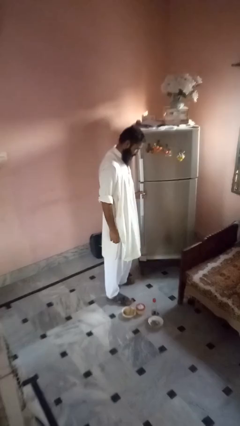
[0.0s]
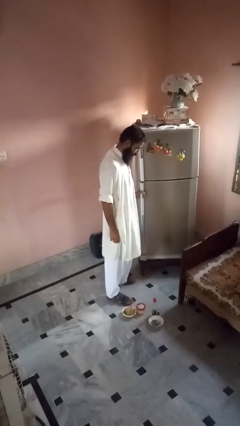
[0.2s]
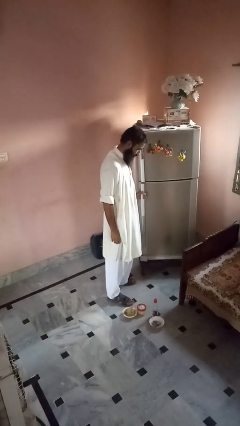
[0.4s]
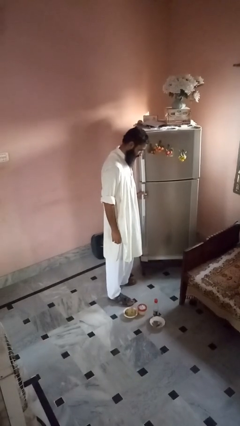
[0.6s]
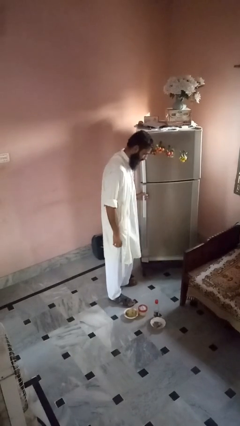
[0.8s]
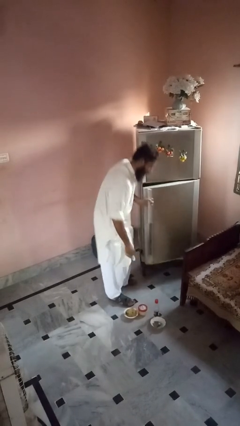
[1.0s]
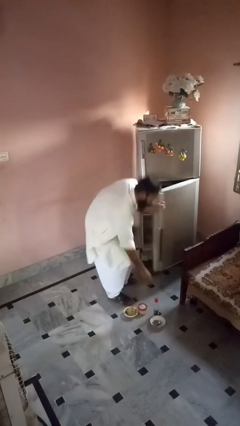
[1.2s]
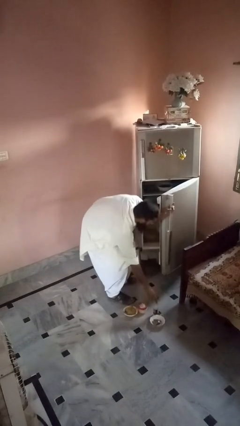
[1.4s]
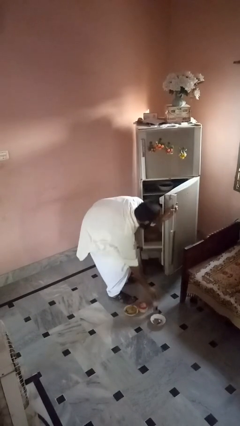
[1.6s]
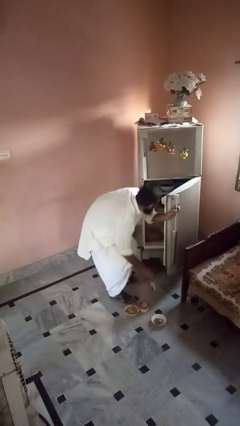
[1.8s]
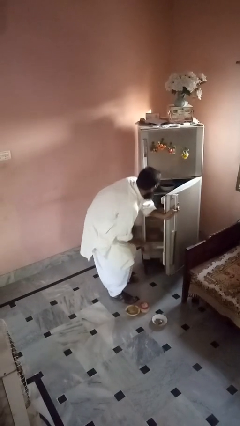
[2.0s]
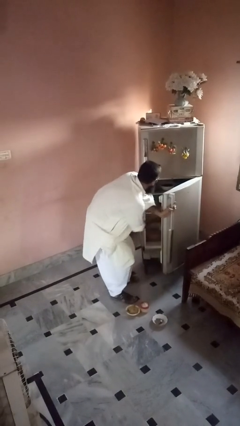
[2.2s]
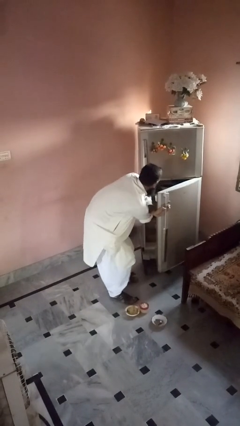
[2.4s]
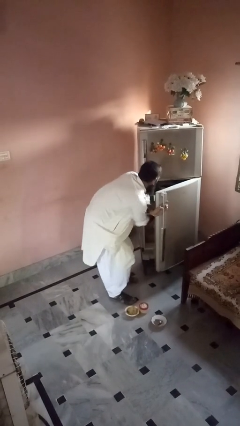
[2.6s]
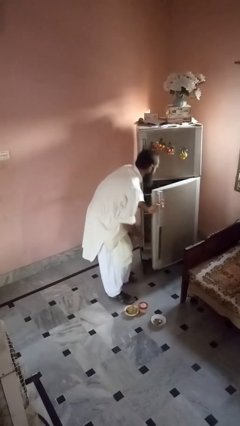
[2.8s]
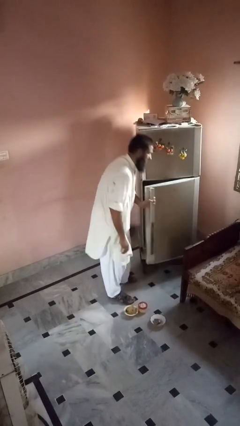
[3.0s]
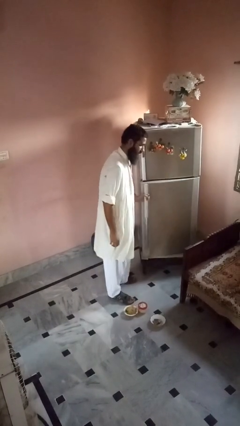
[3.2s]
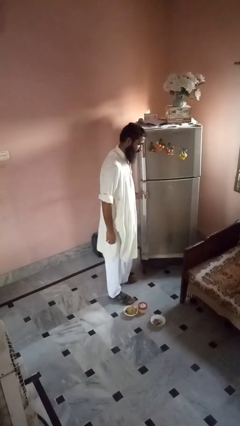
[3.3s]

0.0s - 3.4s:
person loads groceries into refrigerator

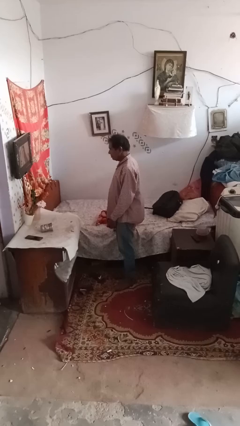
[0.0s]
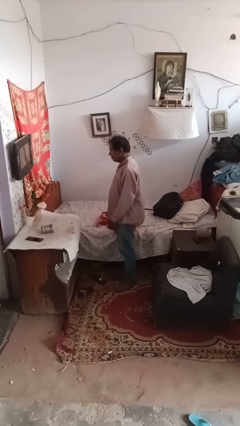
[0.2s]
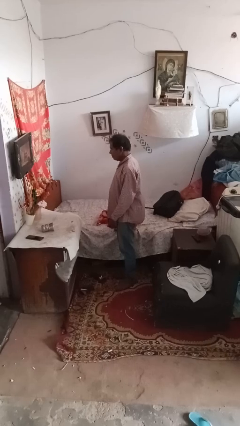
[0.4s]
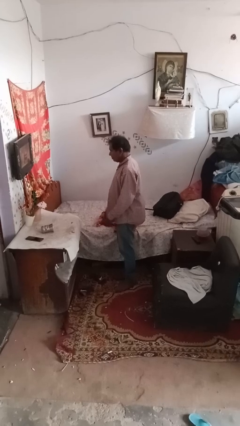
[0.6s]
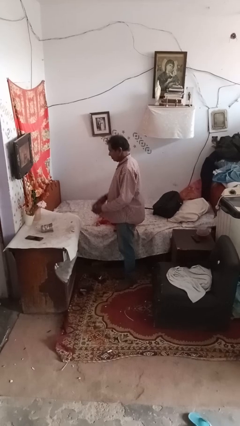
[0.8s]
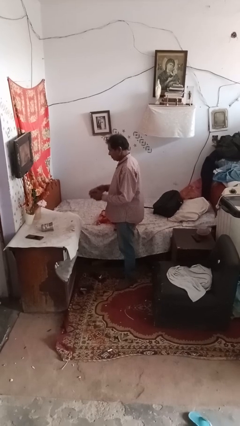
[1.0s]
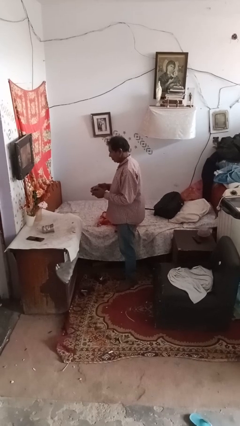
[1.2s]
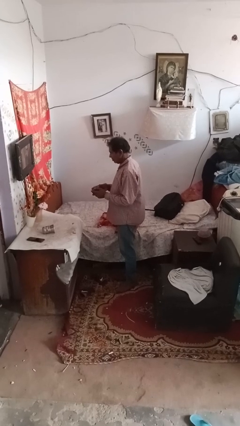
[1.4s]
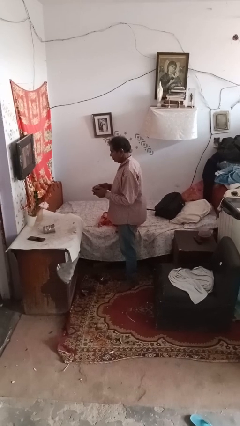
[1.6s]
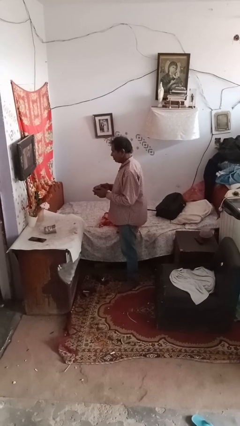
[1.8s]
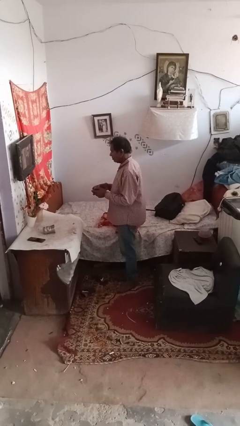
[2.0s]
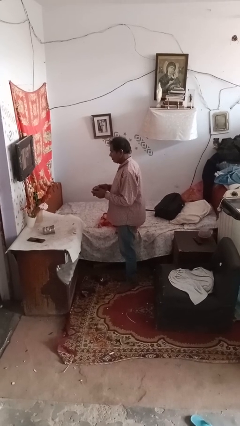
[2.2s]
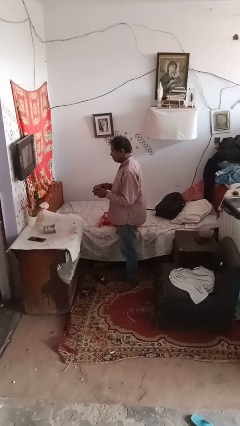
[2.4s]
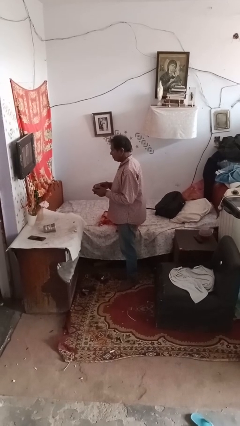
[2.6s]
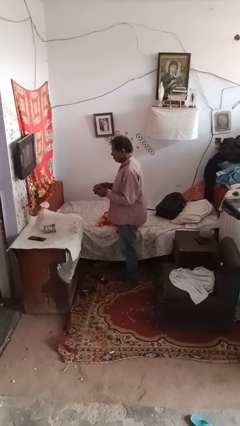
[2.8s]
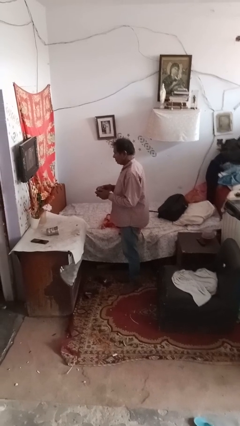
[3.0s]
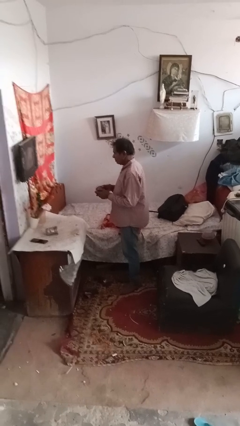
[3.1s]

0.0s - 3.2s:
person interacts with handheld game

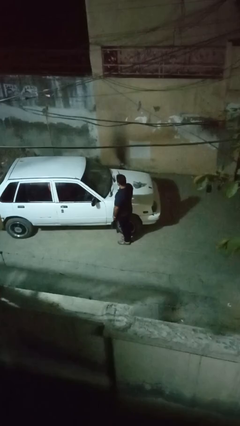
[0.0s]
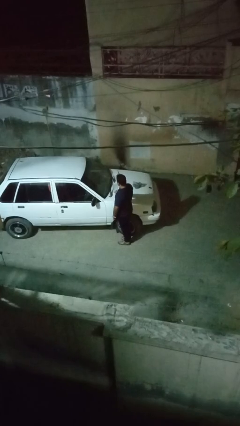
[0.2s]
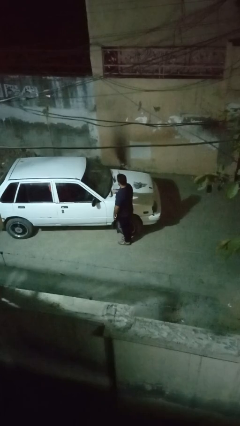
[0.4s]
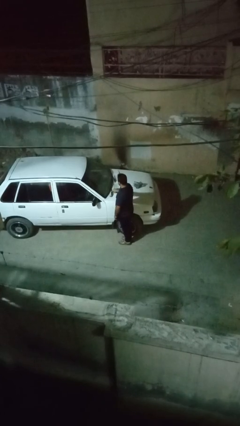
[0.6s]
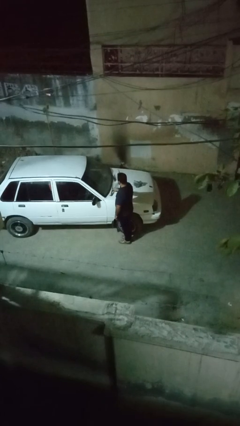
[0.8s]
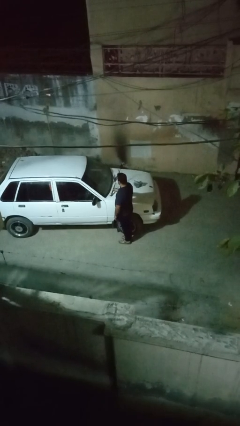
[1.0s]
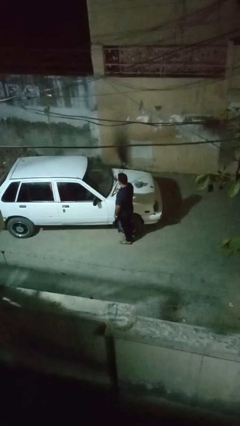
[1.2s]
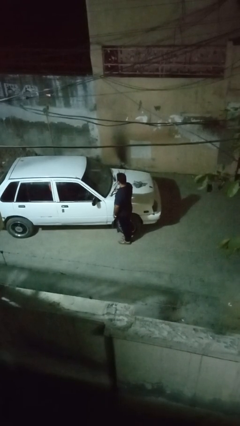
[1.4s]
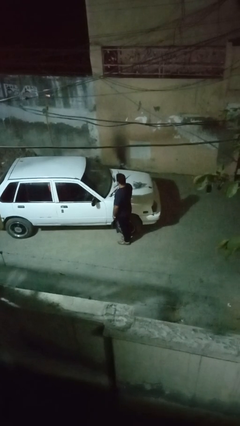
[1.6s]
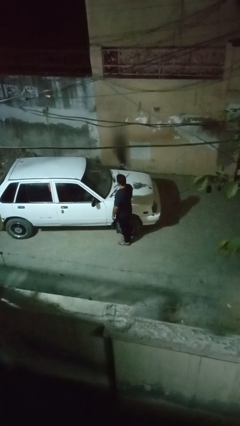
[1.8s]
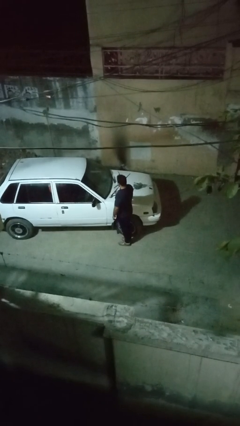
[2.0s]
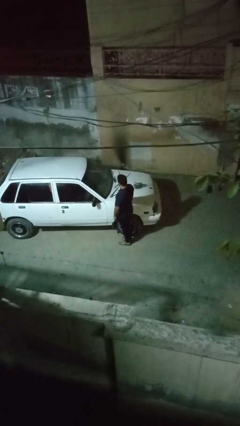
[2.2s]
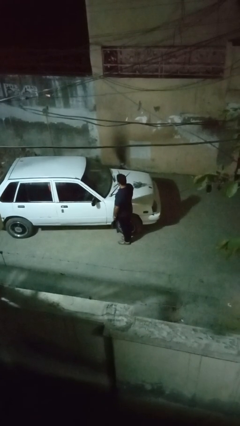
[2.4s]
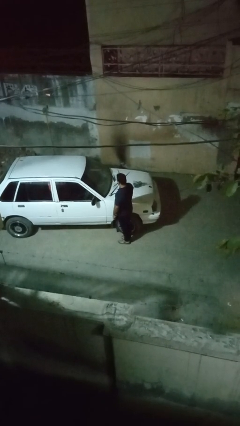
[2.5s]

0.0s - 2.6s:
person flips up car wipers

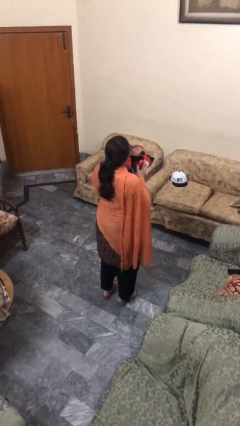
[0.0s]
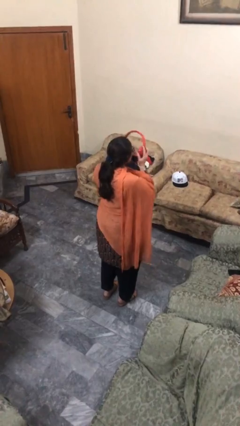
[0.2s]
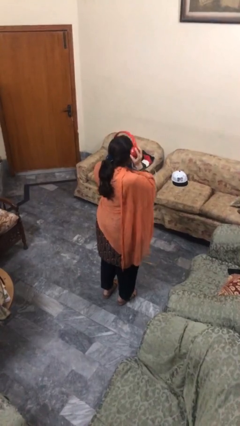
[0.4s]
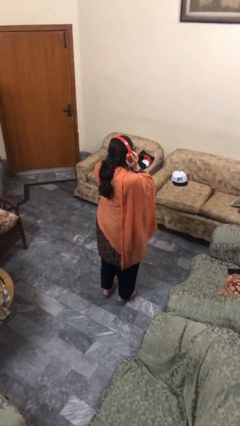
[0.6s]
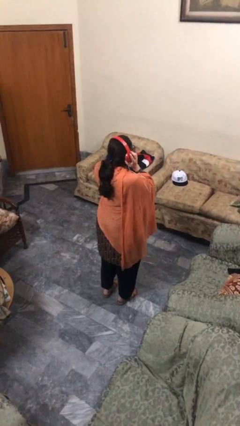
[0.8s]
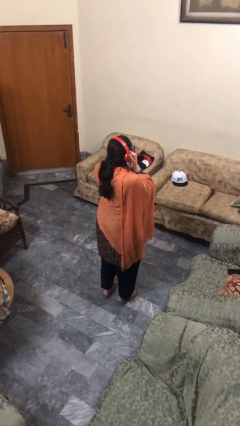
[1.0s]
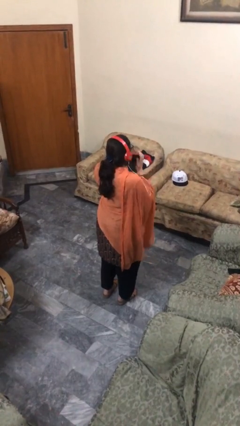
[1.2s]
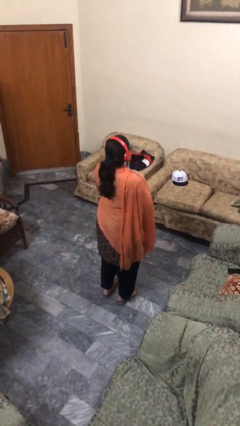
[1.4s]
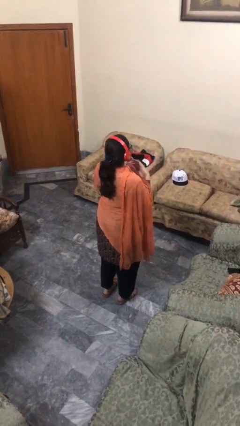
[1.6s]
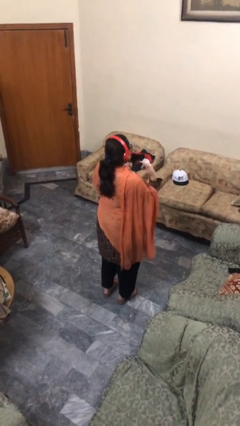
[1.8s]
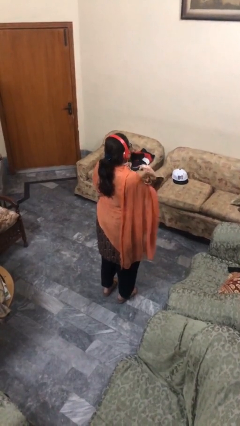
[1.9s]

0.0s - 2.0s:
person puts on headphones

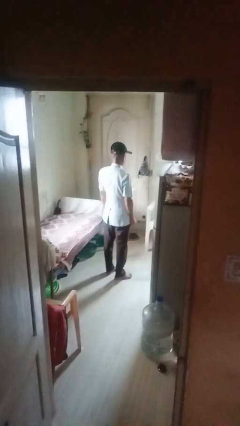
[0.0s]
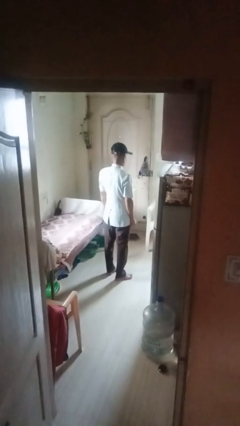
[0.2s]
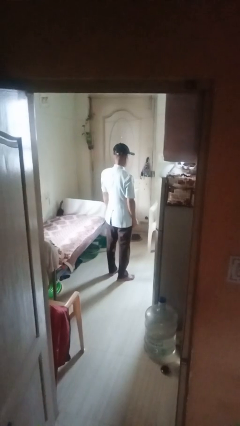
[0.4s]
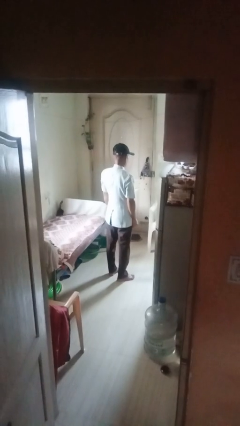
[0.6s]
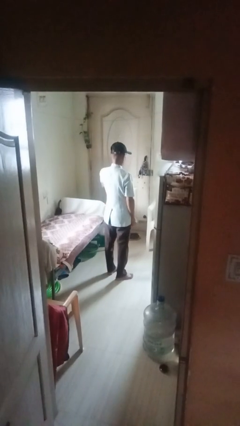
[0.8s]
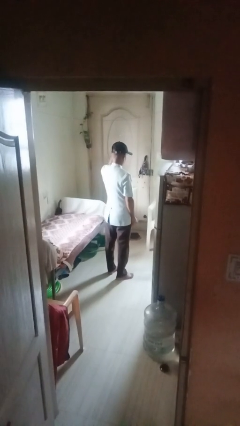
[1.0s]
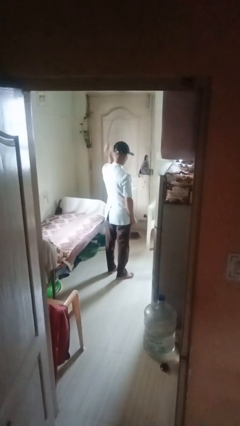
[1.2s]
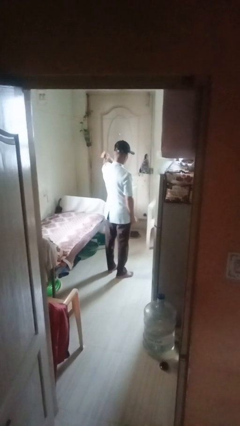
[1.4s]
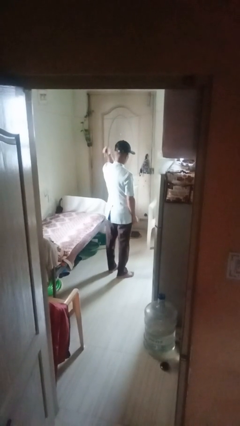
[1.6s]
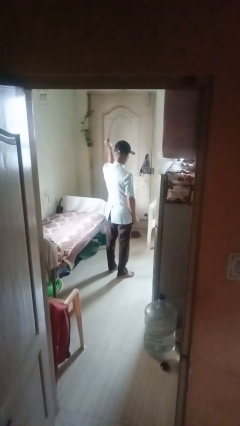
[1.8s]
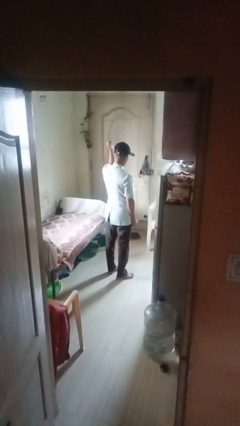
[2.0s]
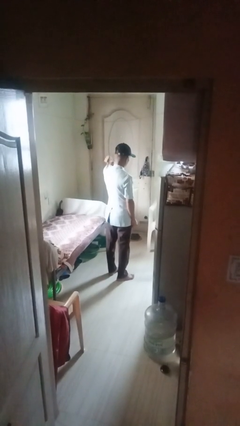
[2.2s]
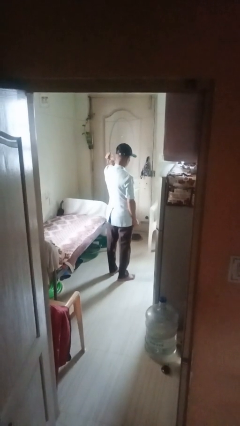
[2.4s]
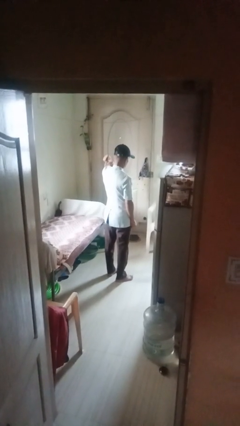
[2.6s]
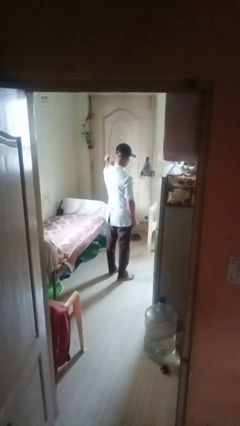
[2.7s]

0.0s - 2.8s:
person gestures behind me

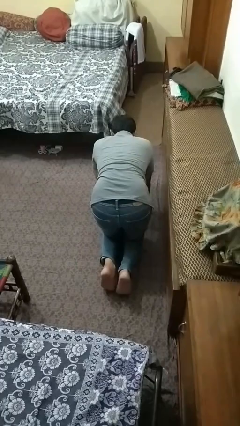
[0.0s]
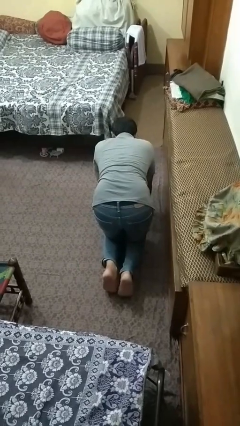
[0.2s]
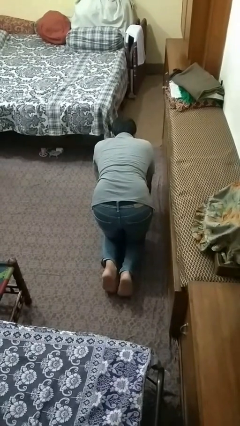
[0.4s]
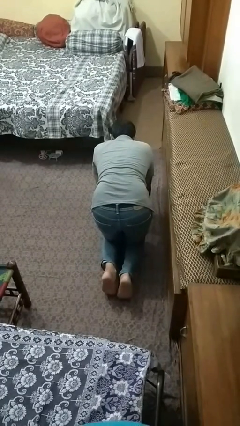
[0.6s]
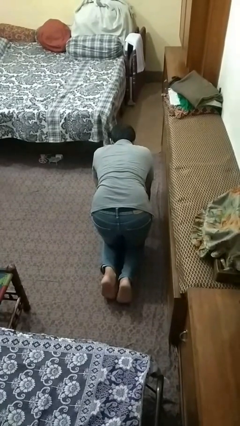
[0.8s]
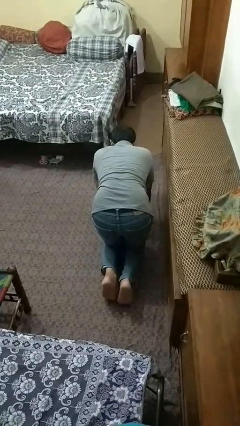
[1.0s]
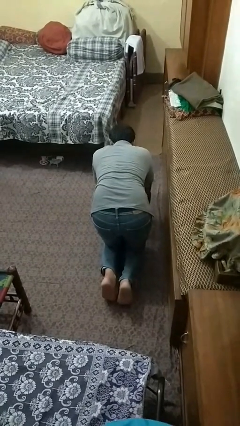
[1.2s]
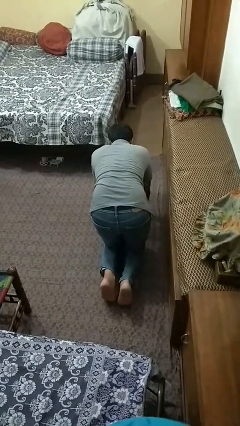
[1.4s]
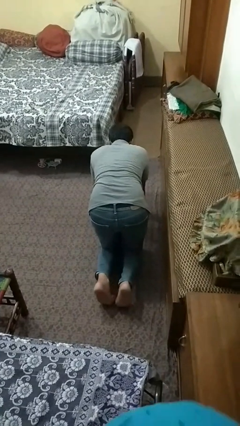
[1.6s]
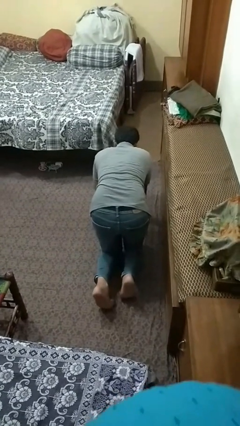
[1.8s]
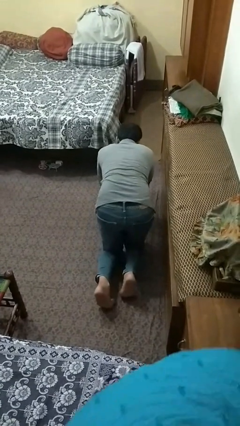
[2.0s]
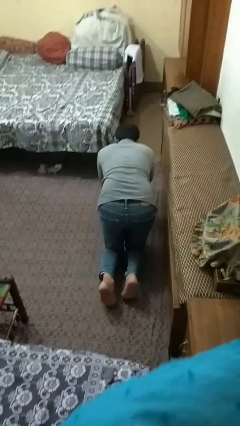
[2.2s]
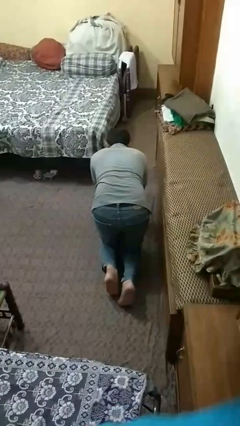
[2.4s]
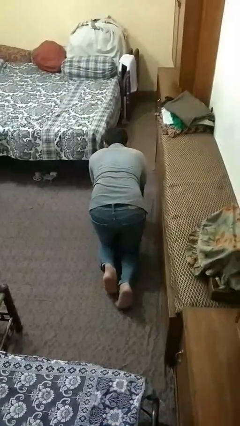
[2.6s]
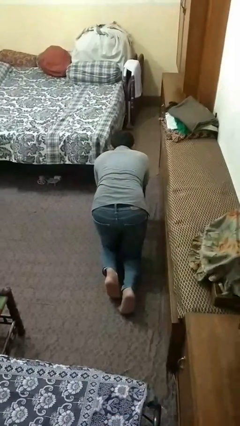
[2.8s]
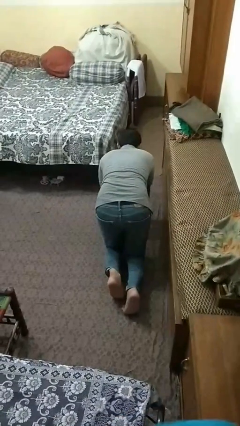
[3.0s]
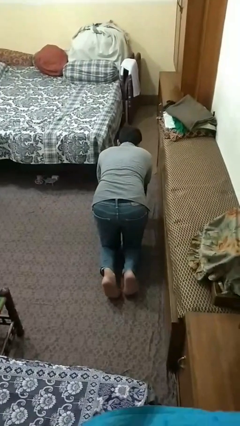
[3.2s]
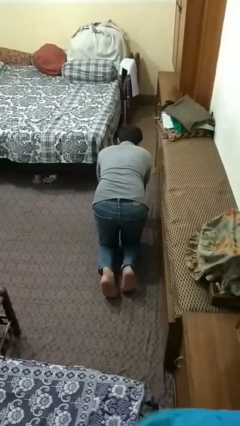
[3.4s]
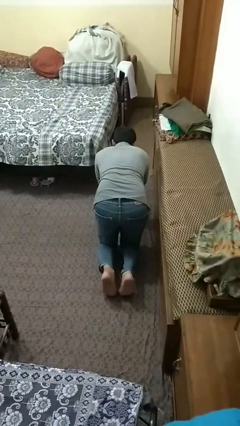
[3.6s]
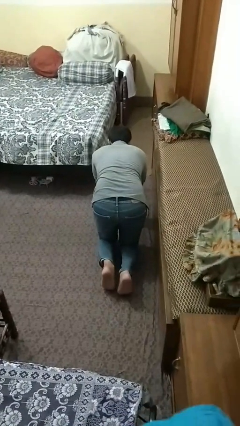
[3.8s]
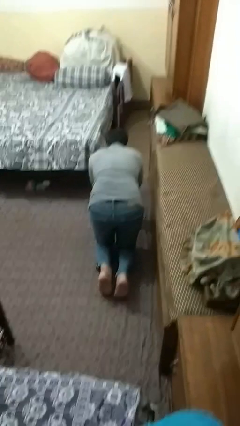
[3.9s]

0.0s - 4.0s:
person crawls
